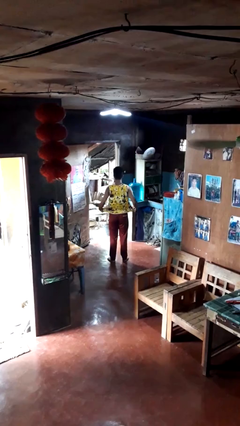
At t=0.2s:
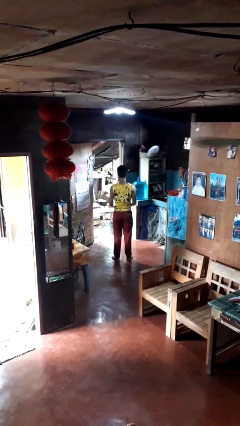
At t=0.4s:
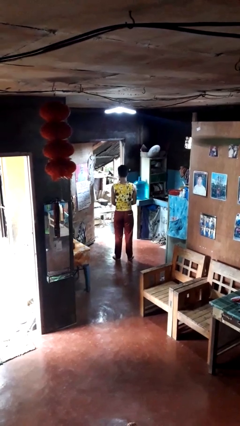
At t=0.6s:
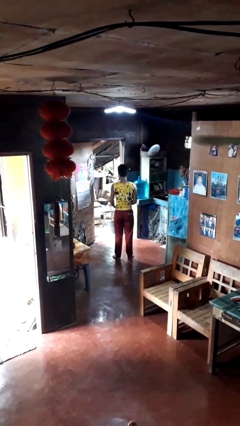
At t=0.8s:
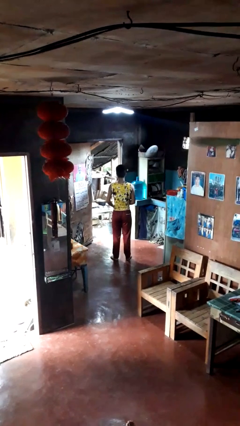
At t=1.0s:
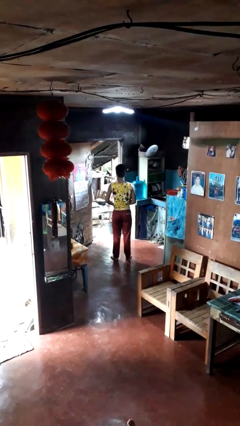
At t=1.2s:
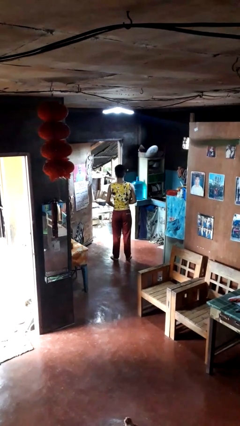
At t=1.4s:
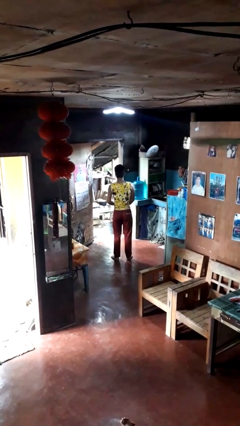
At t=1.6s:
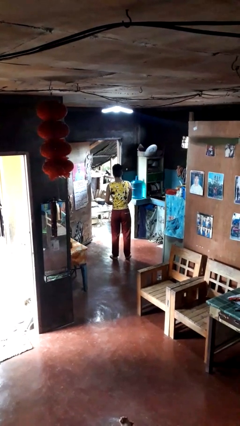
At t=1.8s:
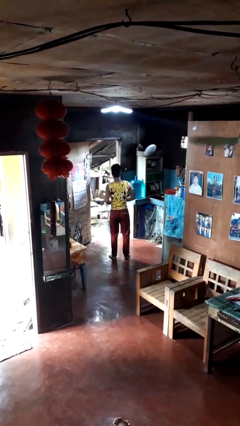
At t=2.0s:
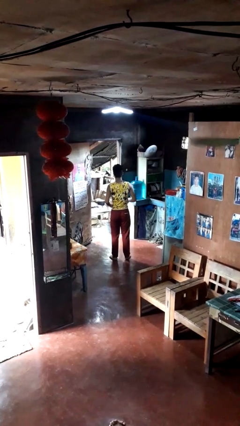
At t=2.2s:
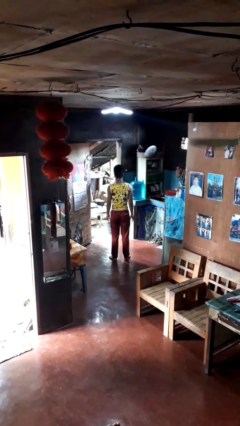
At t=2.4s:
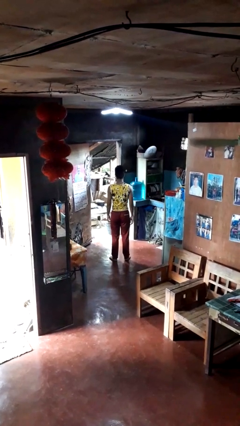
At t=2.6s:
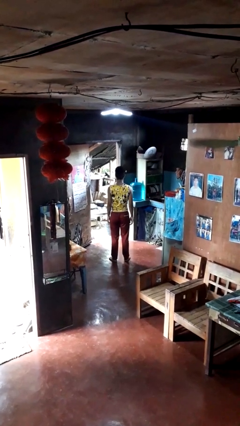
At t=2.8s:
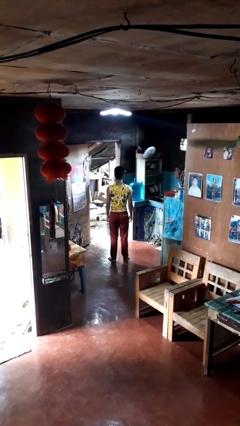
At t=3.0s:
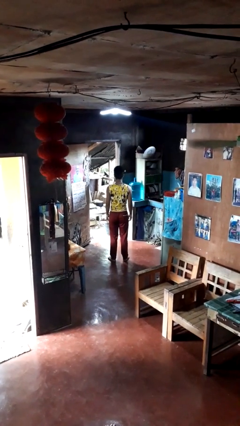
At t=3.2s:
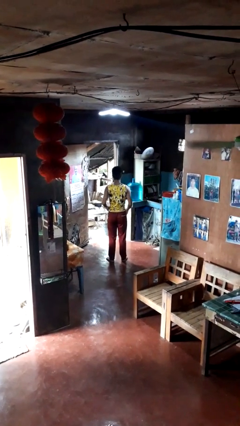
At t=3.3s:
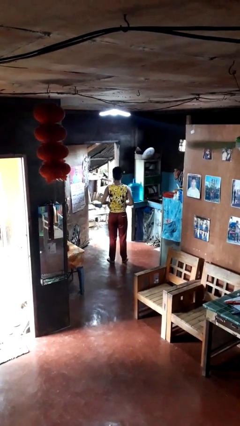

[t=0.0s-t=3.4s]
person tucks in shirt

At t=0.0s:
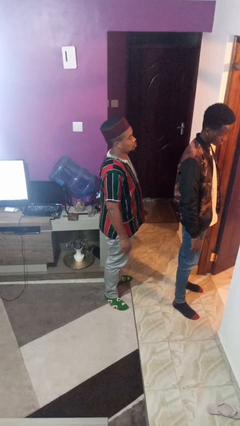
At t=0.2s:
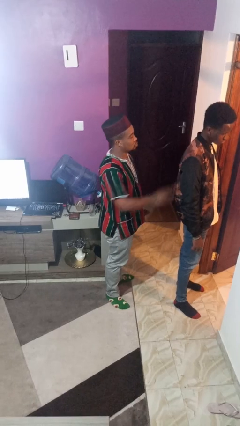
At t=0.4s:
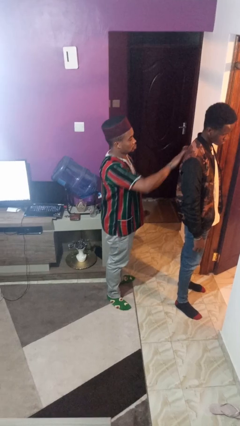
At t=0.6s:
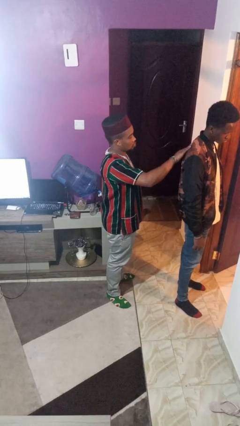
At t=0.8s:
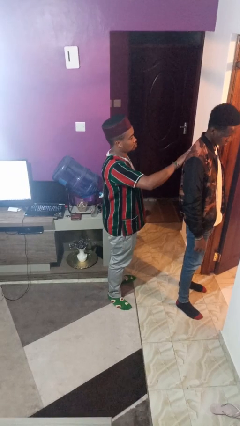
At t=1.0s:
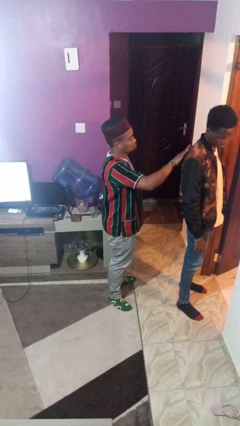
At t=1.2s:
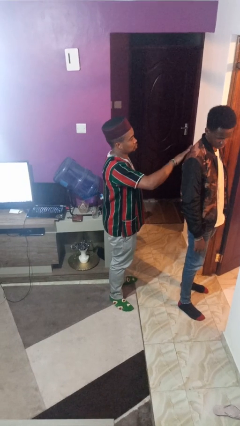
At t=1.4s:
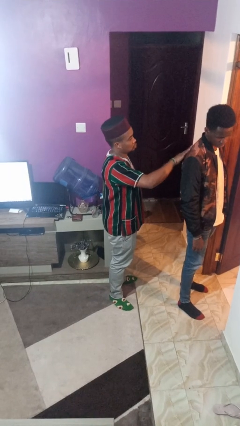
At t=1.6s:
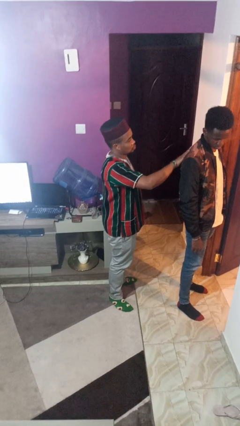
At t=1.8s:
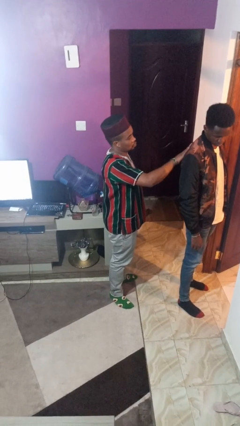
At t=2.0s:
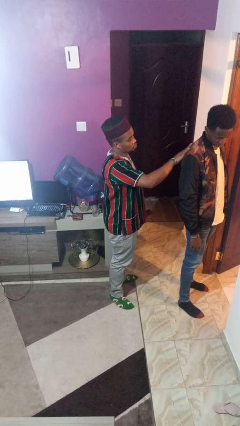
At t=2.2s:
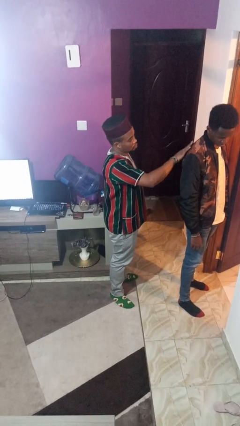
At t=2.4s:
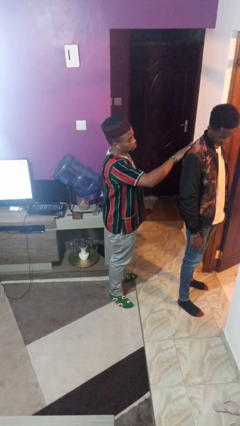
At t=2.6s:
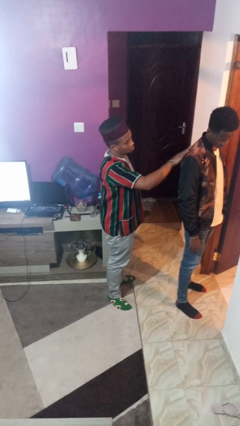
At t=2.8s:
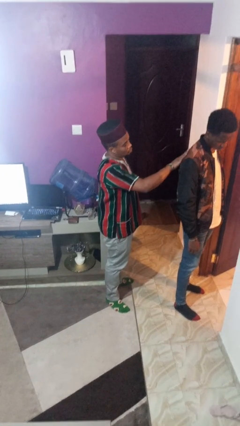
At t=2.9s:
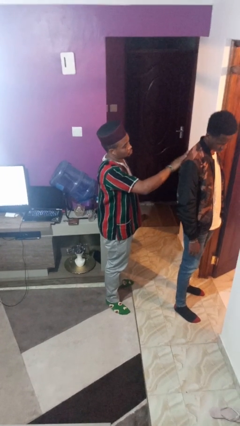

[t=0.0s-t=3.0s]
person touches back of person

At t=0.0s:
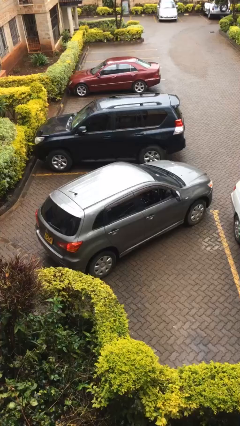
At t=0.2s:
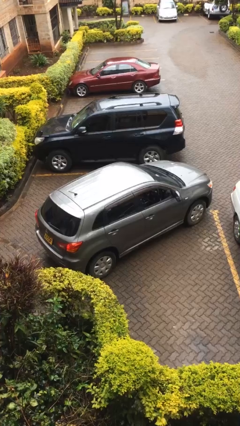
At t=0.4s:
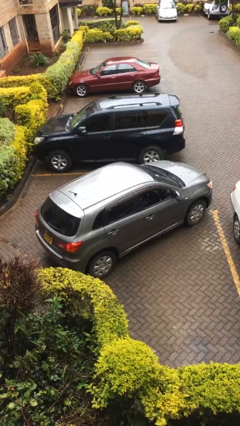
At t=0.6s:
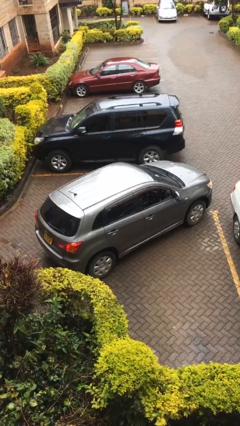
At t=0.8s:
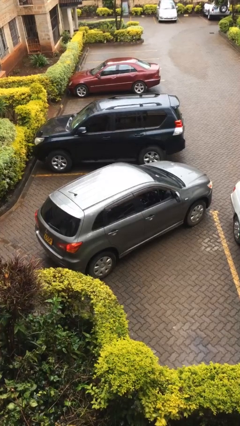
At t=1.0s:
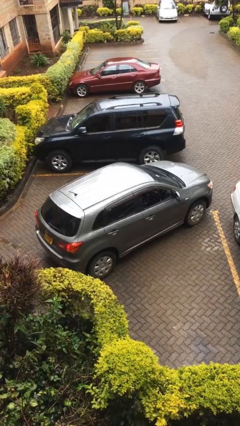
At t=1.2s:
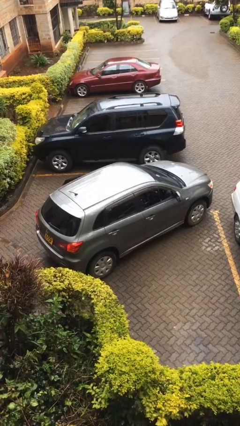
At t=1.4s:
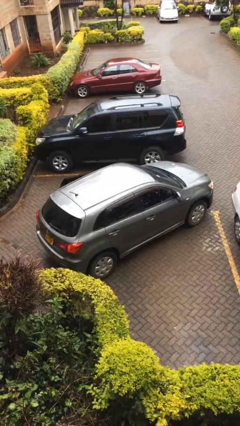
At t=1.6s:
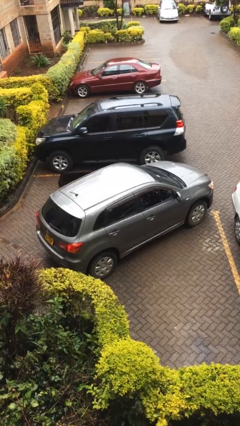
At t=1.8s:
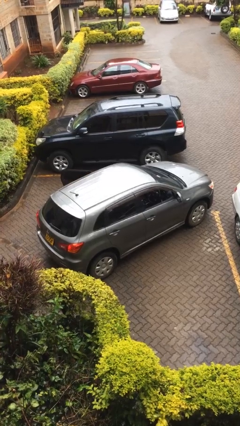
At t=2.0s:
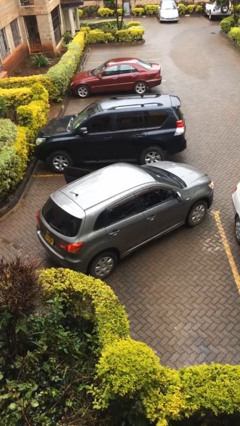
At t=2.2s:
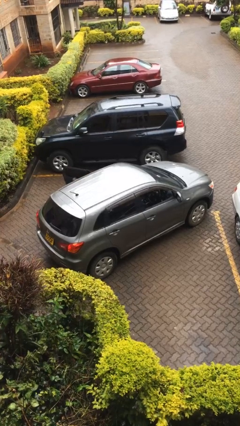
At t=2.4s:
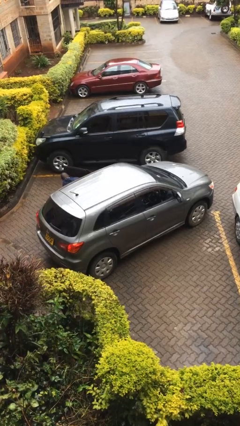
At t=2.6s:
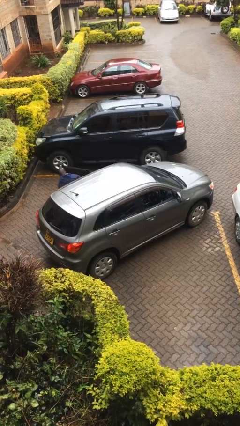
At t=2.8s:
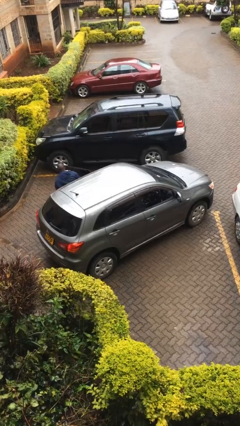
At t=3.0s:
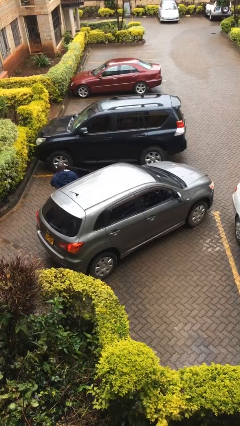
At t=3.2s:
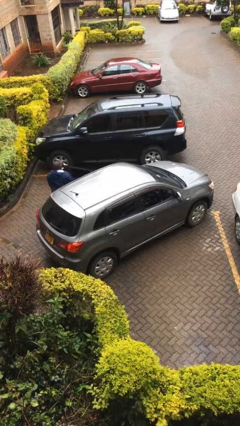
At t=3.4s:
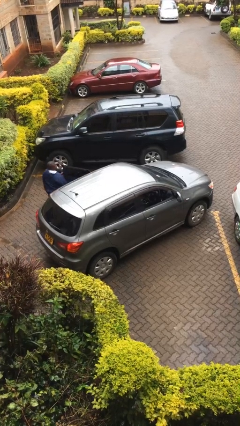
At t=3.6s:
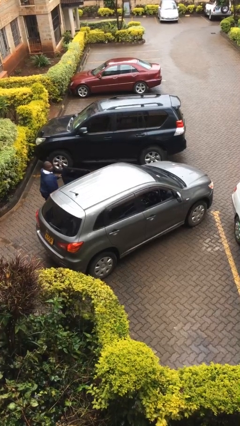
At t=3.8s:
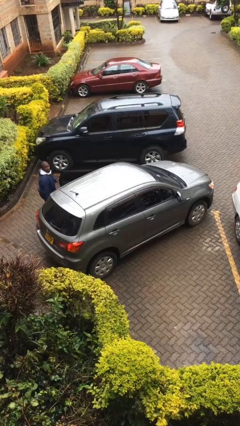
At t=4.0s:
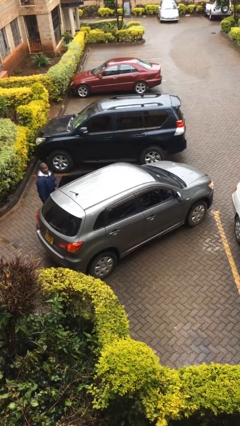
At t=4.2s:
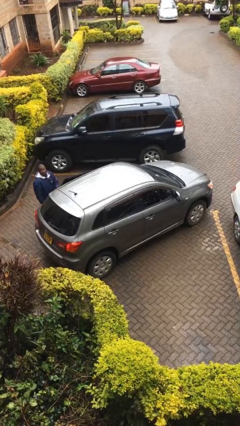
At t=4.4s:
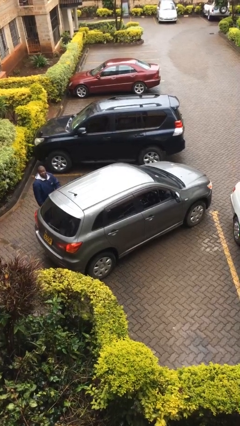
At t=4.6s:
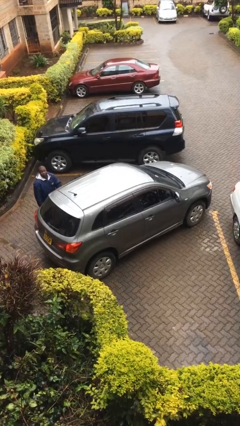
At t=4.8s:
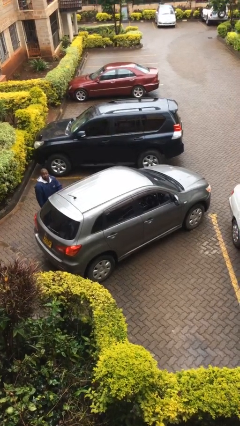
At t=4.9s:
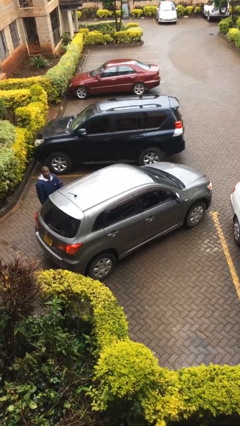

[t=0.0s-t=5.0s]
car drops off person

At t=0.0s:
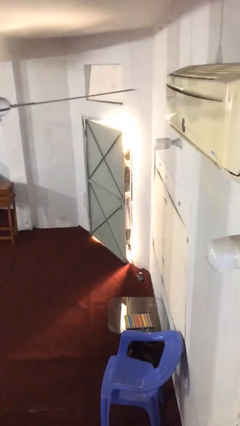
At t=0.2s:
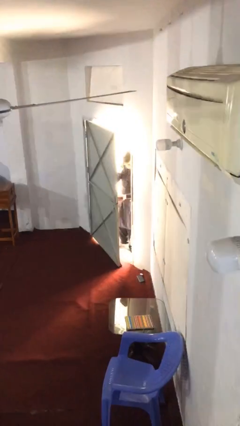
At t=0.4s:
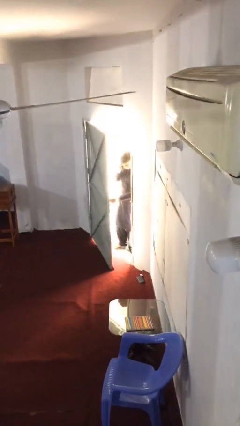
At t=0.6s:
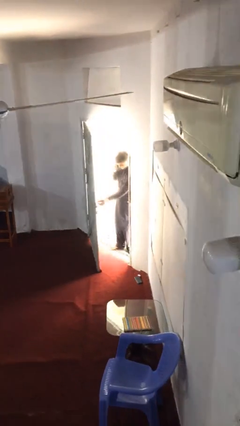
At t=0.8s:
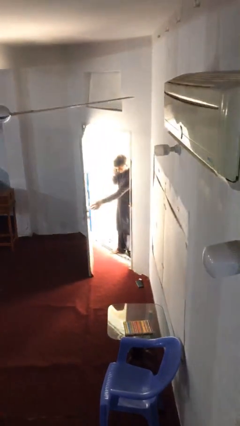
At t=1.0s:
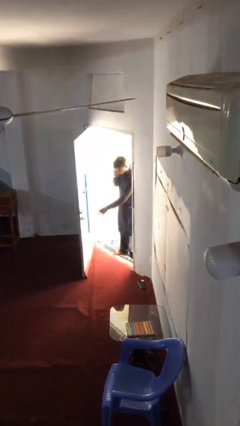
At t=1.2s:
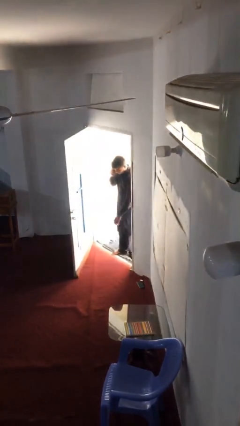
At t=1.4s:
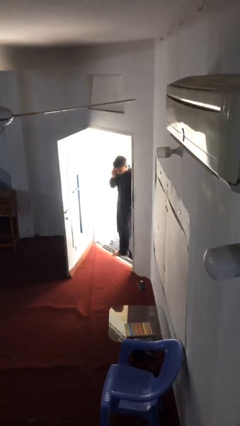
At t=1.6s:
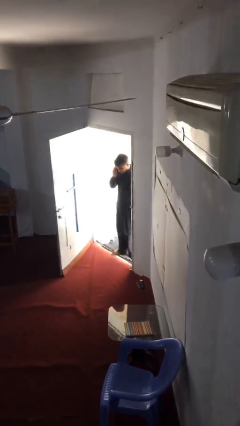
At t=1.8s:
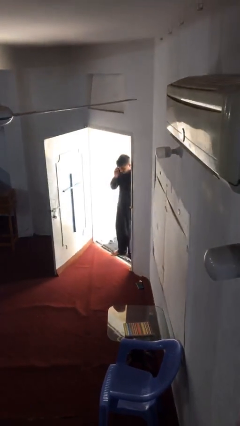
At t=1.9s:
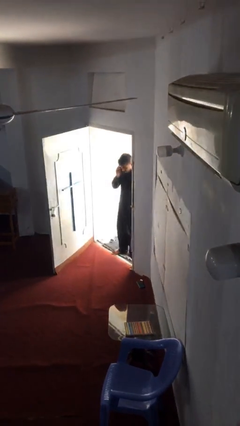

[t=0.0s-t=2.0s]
person opens facility door

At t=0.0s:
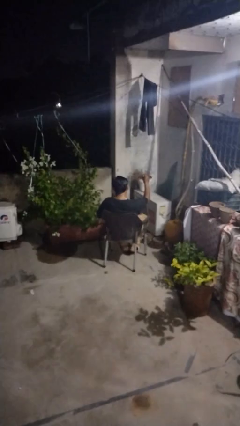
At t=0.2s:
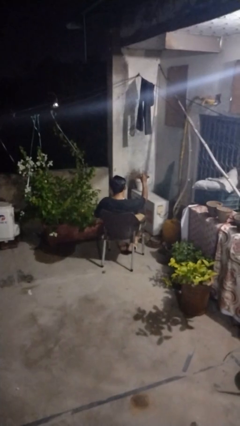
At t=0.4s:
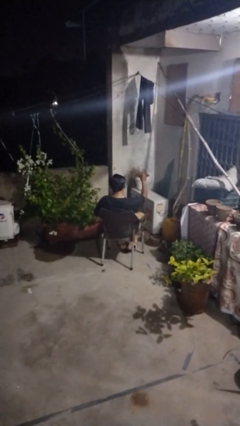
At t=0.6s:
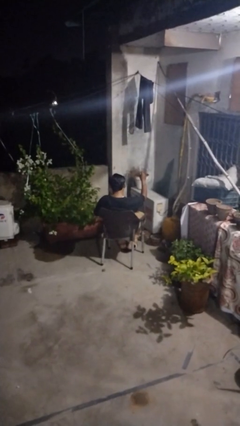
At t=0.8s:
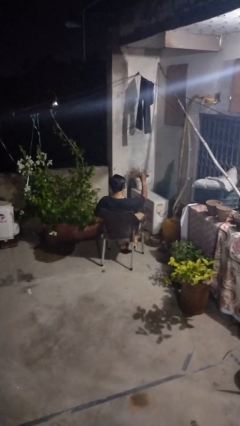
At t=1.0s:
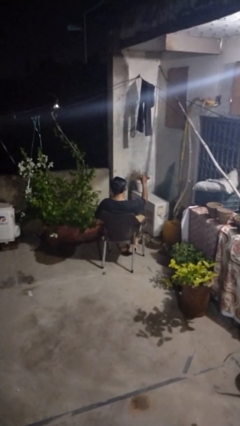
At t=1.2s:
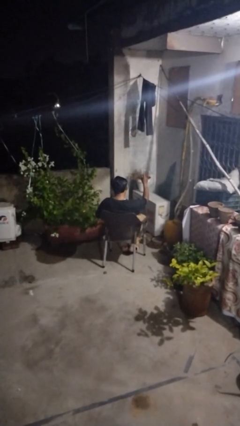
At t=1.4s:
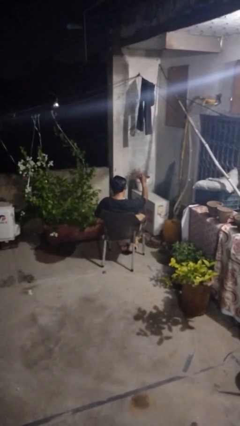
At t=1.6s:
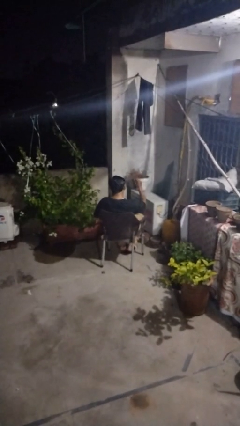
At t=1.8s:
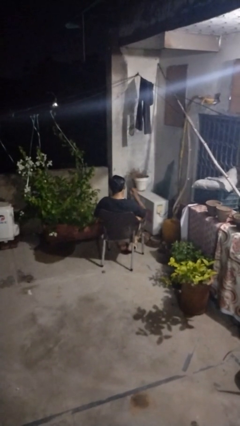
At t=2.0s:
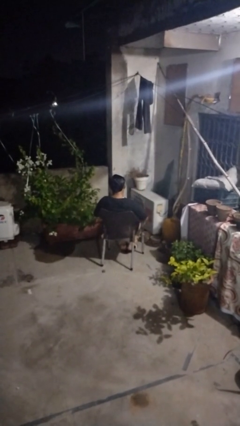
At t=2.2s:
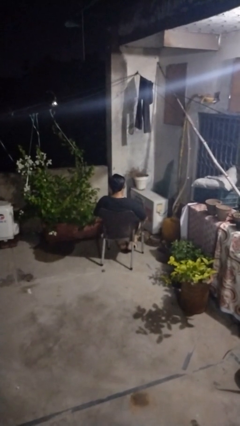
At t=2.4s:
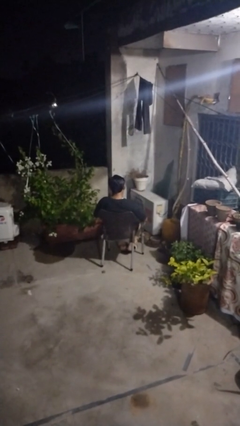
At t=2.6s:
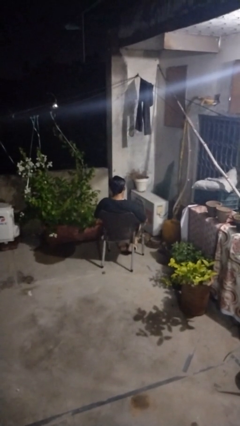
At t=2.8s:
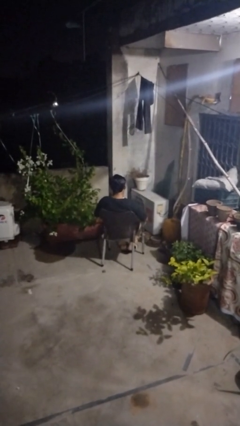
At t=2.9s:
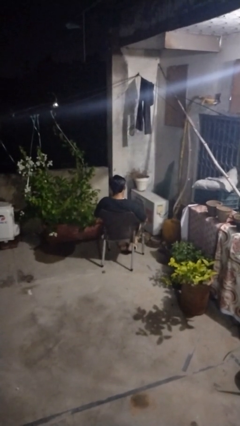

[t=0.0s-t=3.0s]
person gestures number one

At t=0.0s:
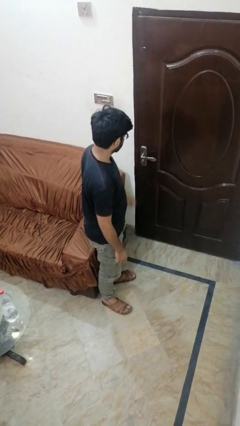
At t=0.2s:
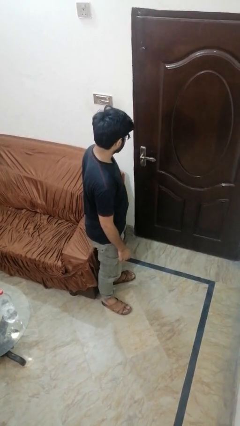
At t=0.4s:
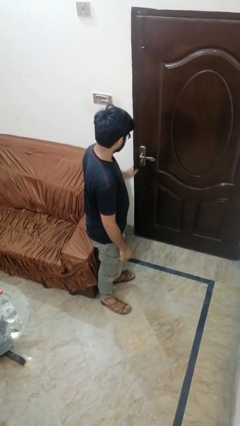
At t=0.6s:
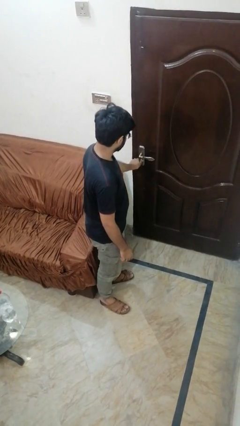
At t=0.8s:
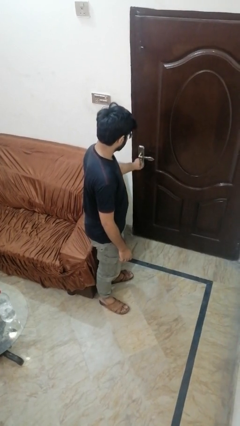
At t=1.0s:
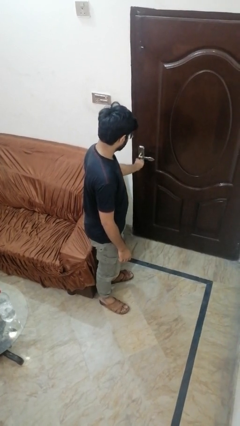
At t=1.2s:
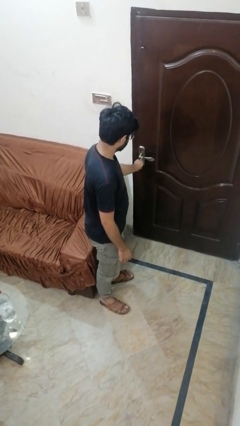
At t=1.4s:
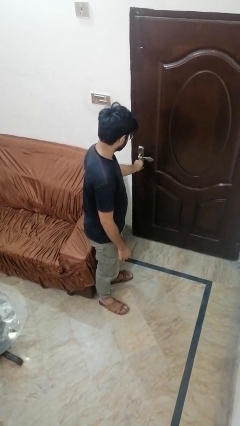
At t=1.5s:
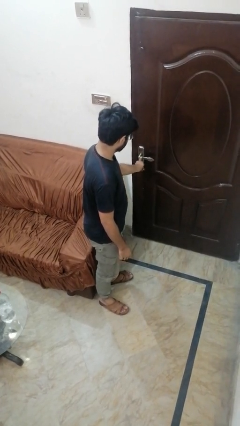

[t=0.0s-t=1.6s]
person locks door with keys
